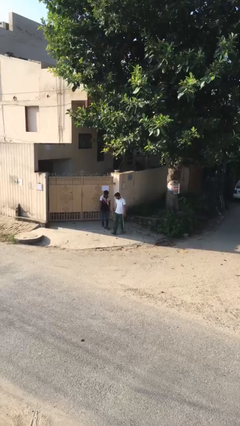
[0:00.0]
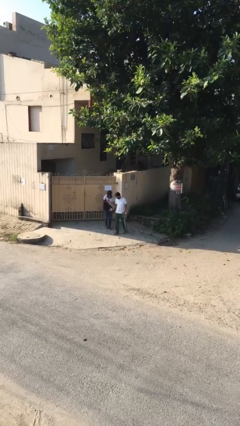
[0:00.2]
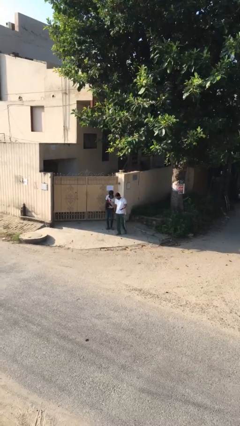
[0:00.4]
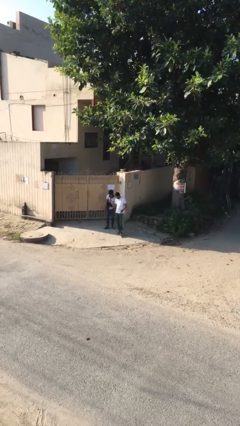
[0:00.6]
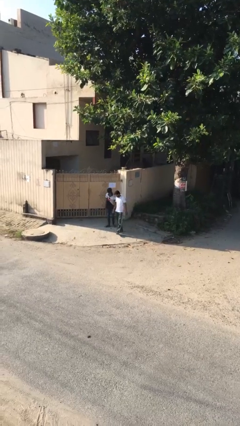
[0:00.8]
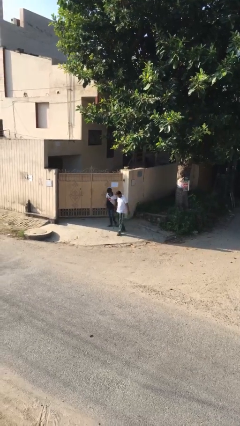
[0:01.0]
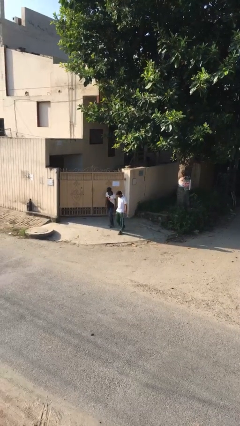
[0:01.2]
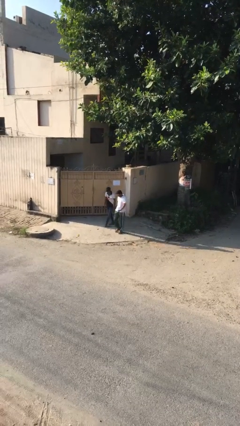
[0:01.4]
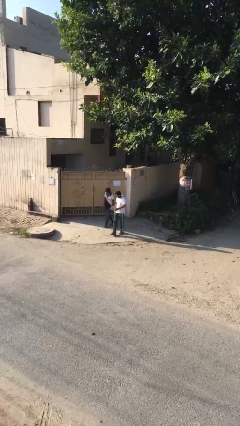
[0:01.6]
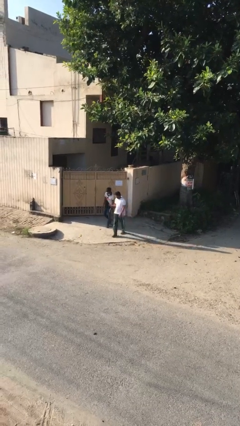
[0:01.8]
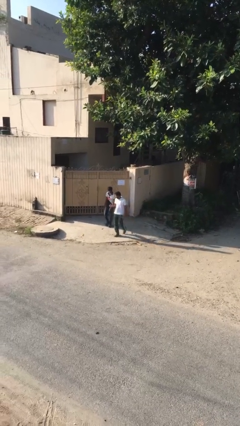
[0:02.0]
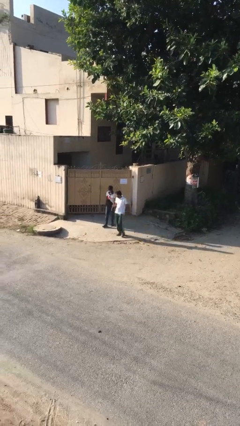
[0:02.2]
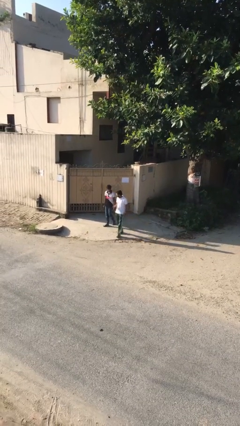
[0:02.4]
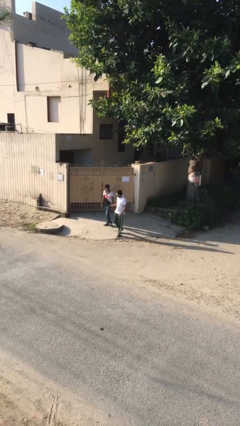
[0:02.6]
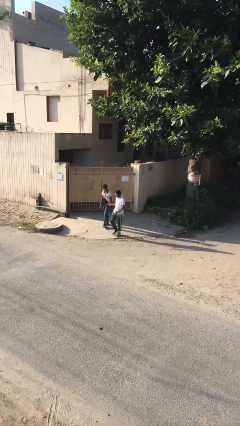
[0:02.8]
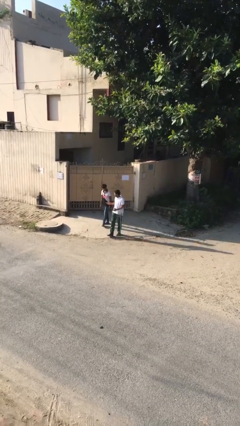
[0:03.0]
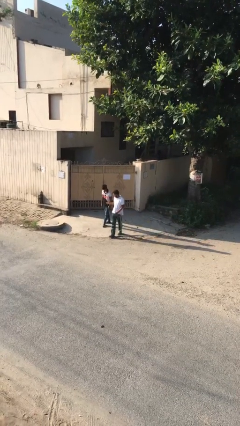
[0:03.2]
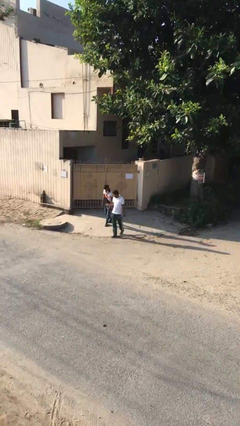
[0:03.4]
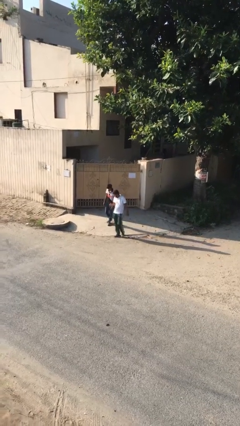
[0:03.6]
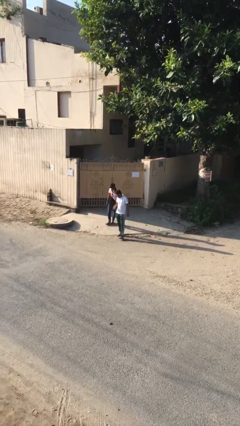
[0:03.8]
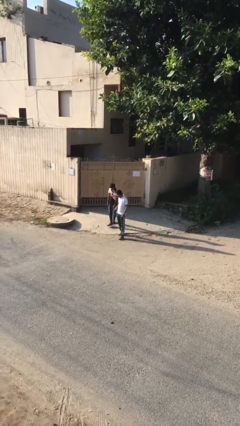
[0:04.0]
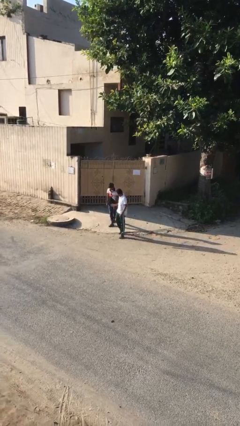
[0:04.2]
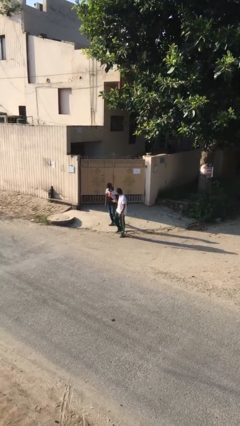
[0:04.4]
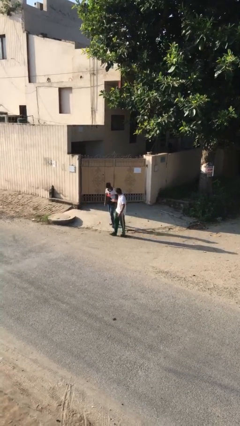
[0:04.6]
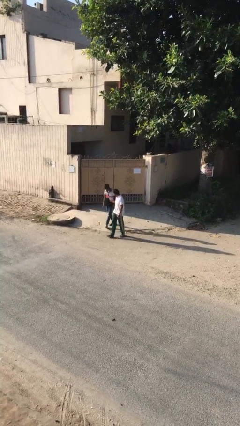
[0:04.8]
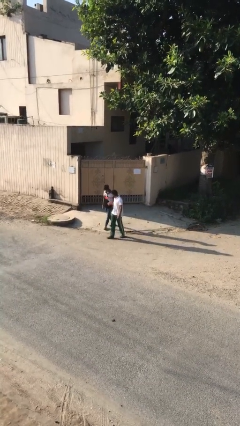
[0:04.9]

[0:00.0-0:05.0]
person talks to person

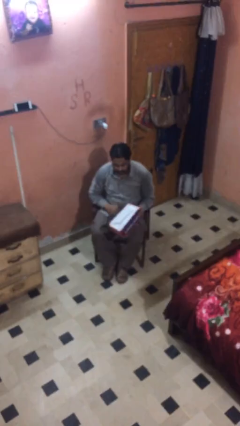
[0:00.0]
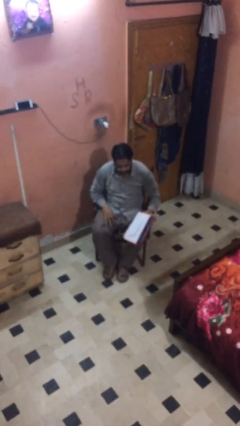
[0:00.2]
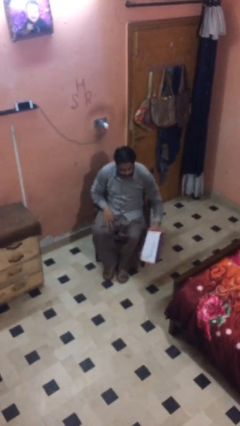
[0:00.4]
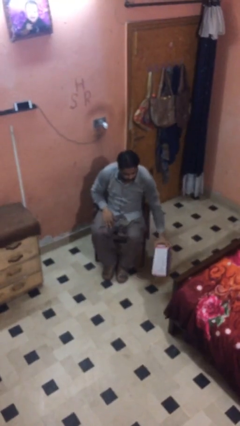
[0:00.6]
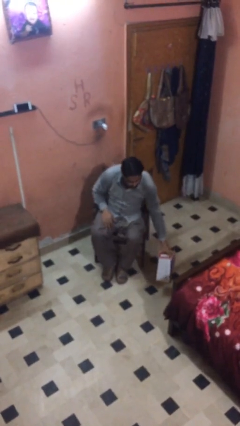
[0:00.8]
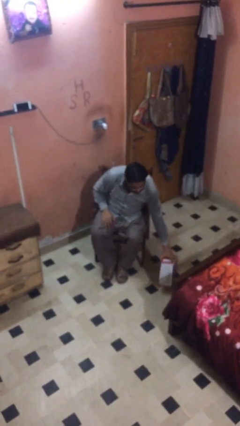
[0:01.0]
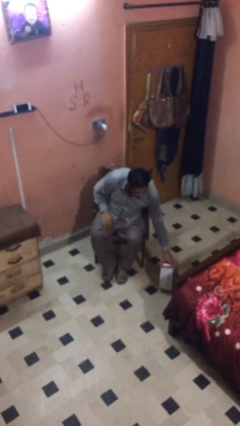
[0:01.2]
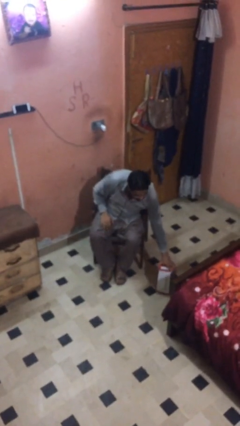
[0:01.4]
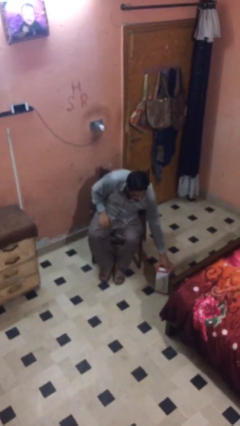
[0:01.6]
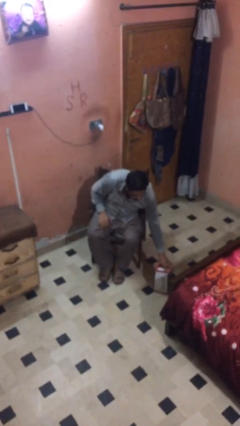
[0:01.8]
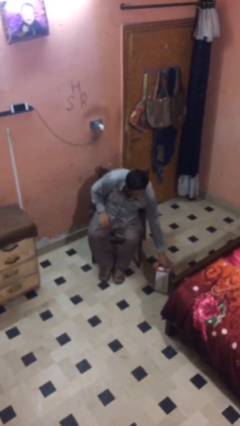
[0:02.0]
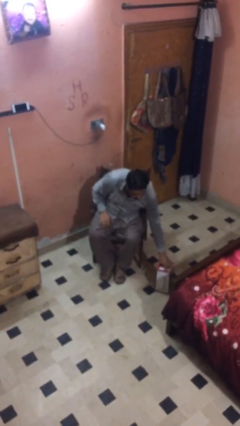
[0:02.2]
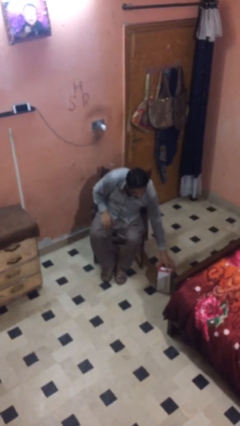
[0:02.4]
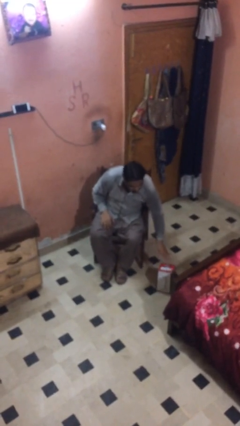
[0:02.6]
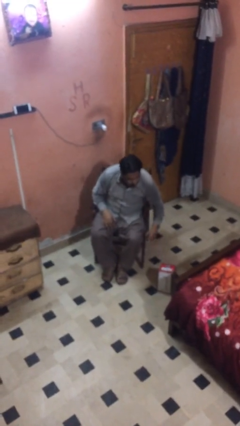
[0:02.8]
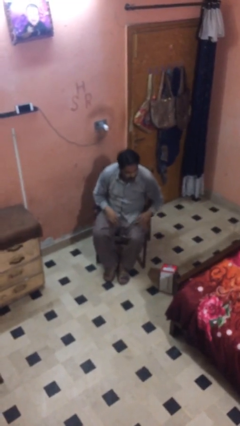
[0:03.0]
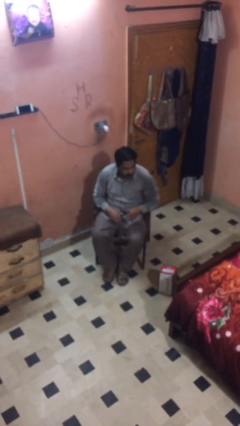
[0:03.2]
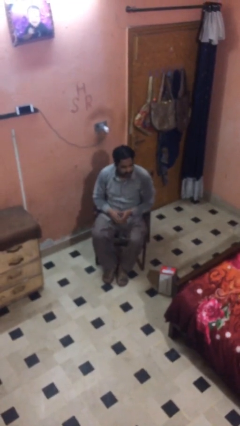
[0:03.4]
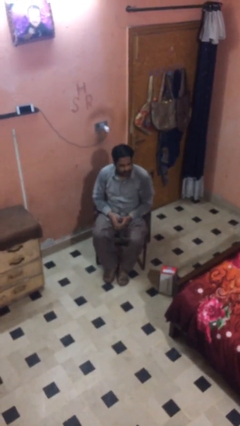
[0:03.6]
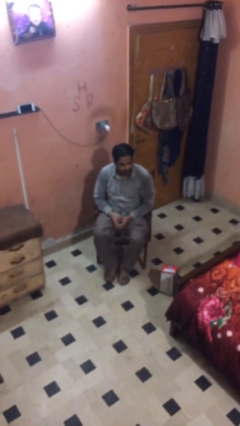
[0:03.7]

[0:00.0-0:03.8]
person puts down object on floor

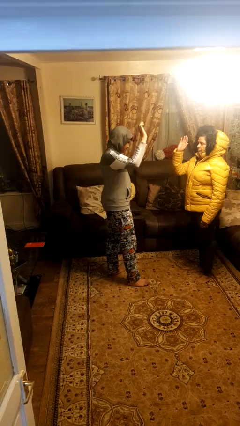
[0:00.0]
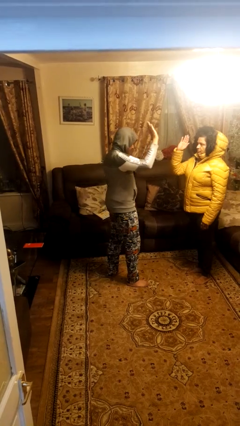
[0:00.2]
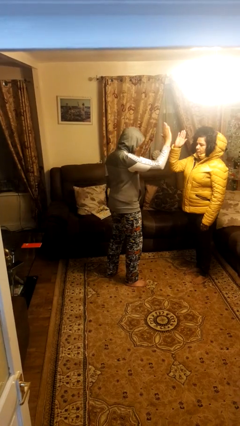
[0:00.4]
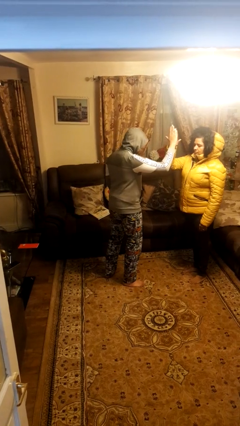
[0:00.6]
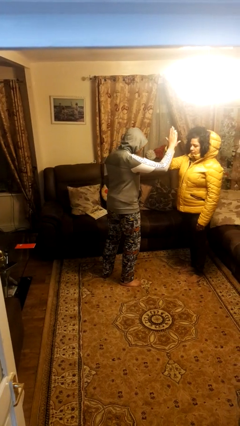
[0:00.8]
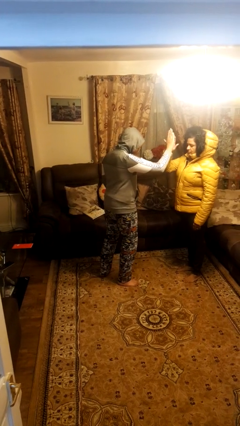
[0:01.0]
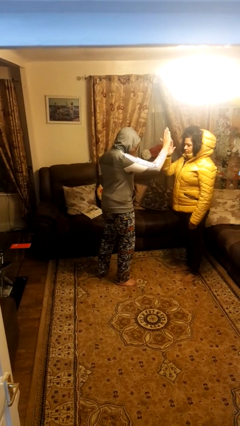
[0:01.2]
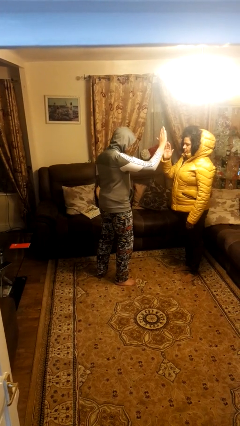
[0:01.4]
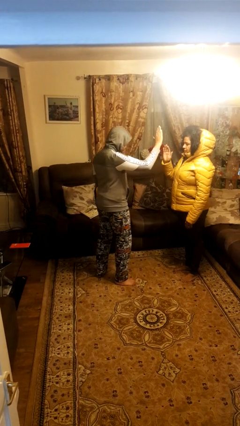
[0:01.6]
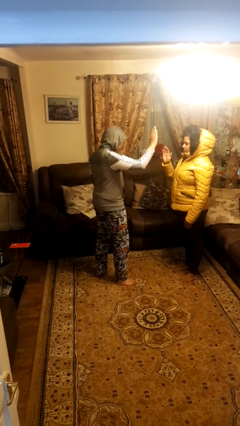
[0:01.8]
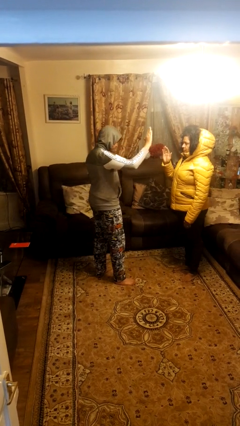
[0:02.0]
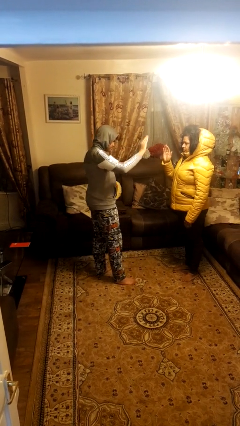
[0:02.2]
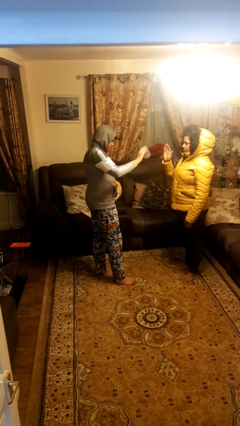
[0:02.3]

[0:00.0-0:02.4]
person highfives hand

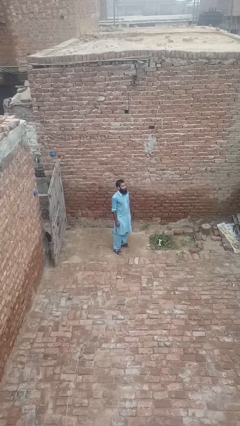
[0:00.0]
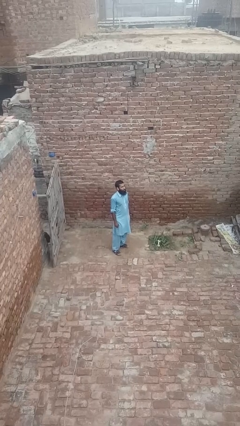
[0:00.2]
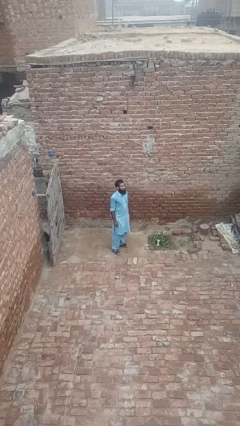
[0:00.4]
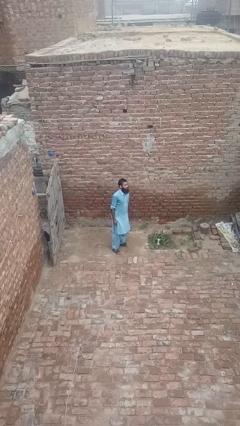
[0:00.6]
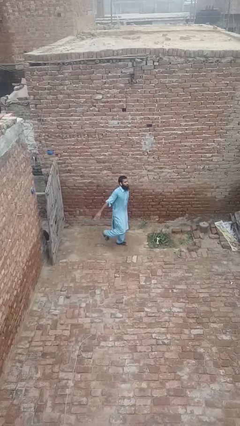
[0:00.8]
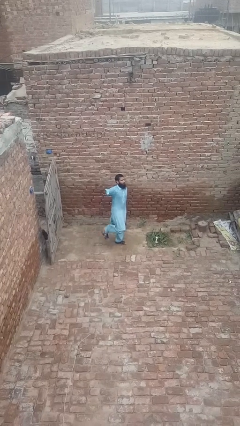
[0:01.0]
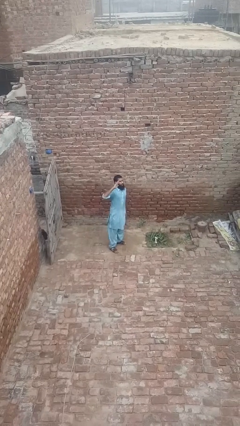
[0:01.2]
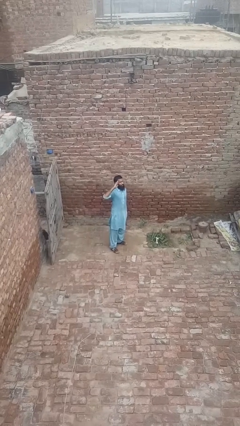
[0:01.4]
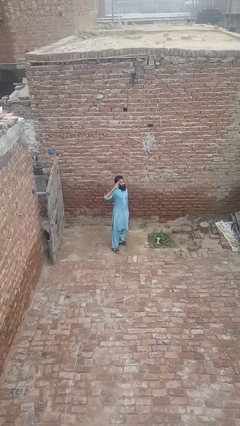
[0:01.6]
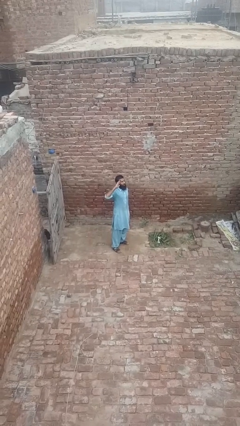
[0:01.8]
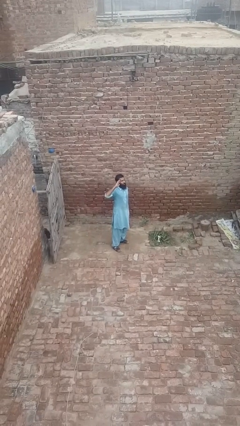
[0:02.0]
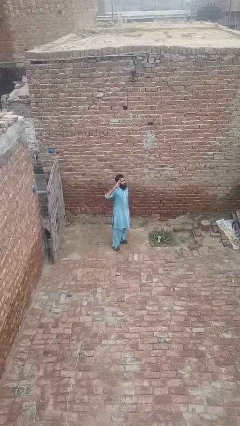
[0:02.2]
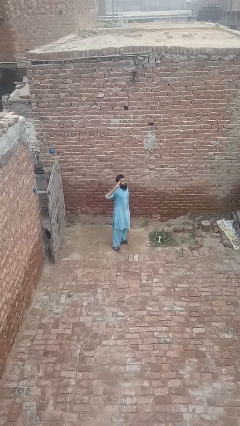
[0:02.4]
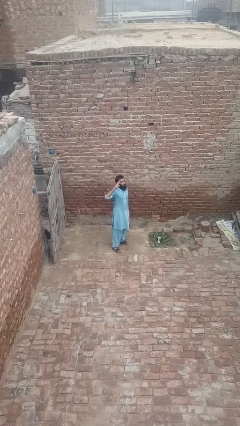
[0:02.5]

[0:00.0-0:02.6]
person salutes

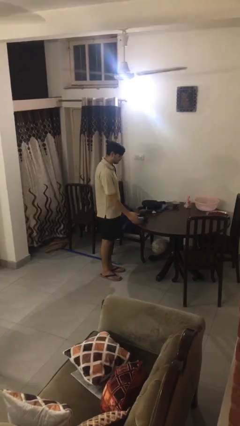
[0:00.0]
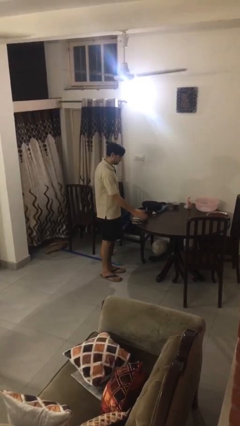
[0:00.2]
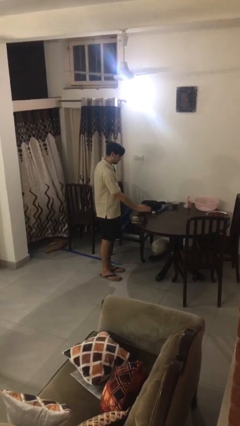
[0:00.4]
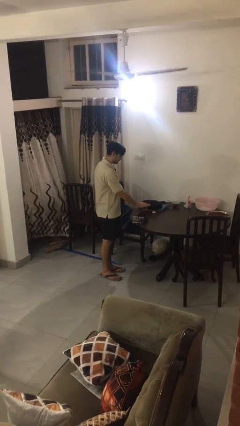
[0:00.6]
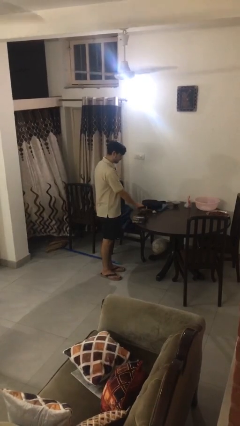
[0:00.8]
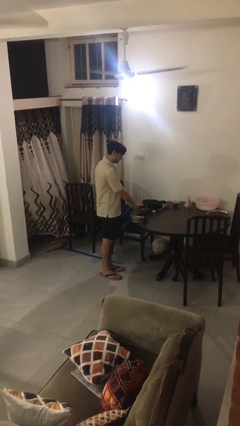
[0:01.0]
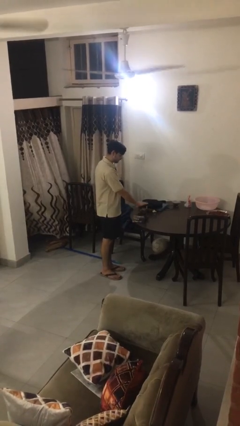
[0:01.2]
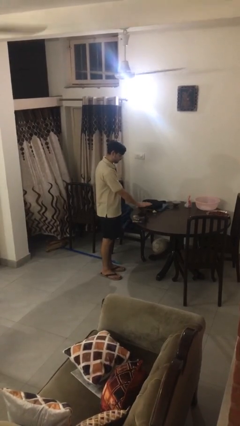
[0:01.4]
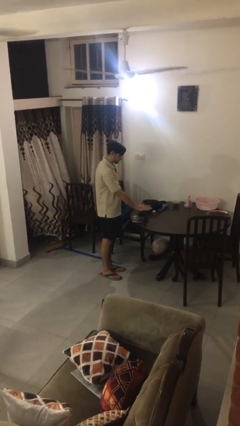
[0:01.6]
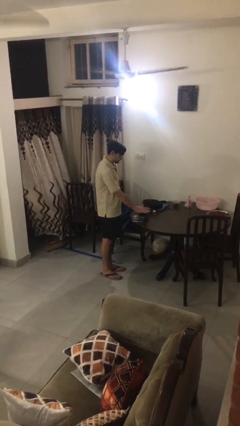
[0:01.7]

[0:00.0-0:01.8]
person waves hand over object

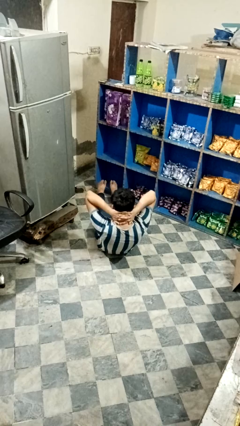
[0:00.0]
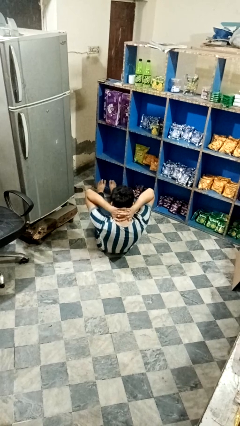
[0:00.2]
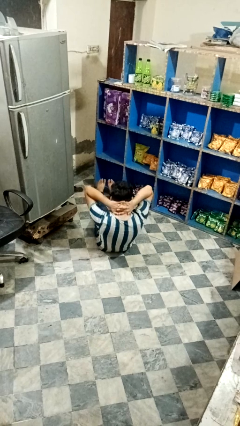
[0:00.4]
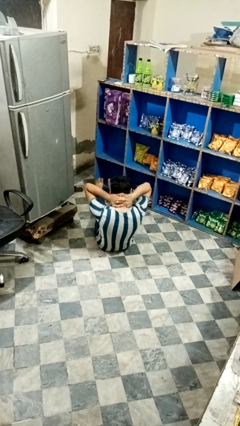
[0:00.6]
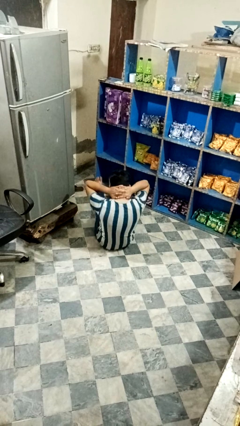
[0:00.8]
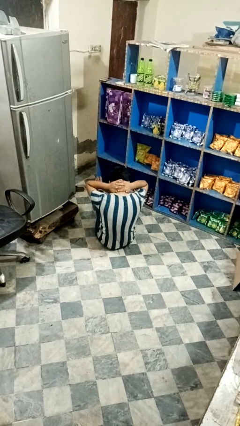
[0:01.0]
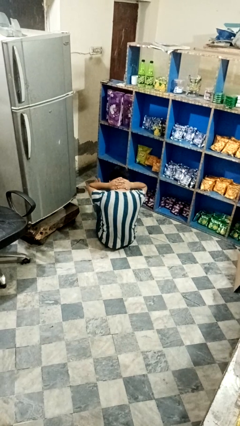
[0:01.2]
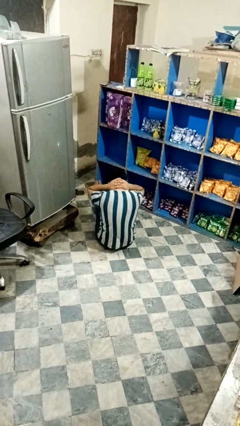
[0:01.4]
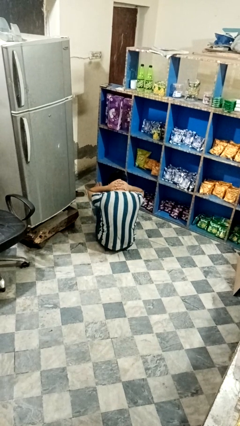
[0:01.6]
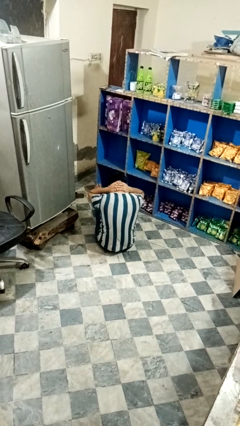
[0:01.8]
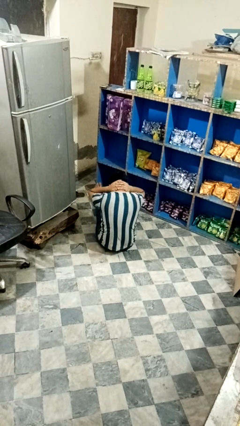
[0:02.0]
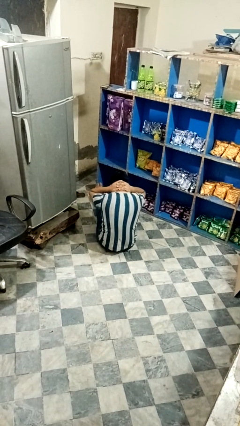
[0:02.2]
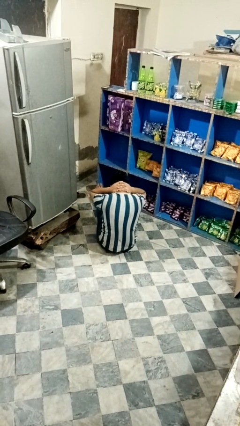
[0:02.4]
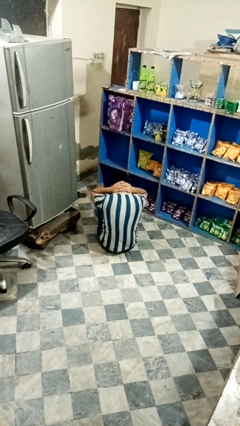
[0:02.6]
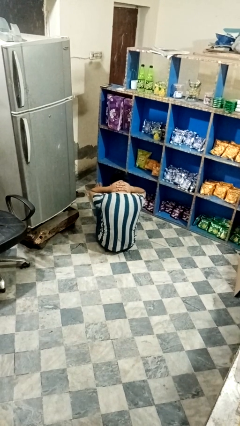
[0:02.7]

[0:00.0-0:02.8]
person exercises with situp
